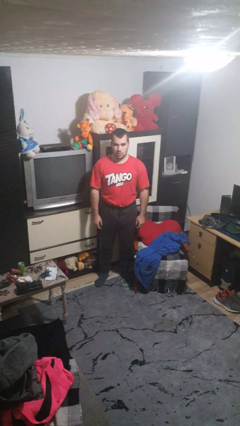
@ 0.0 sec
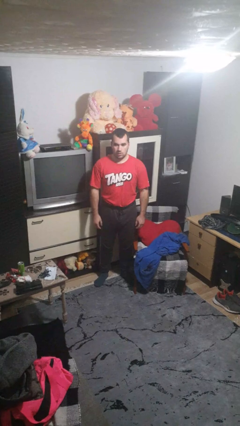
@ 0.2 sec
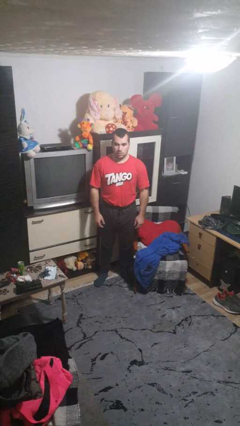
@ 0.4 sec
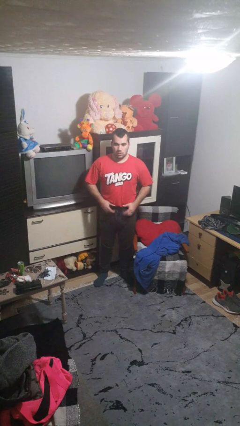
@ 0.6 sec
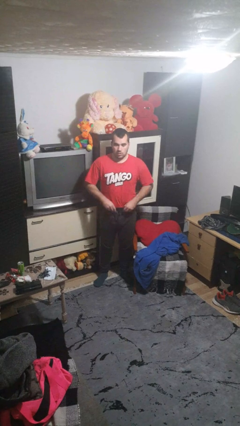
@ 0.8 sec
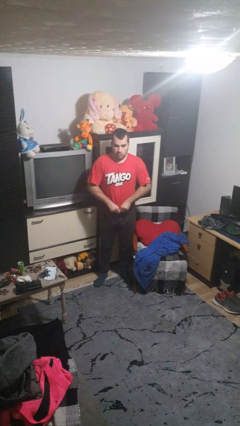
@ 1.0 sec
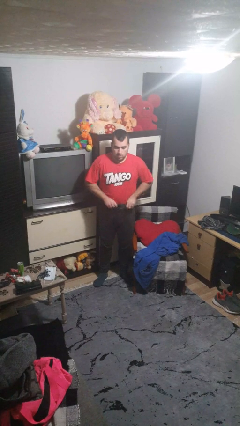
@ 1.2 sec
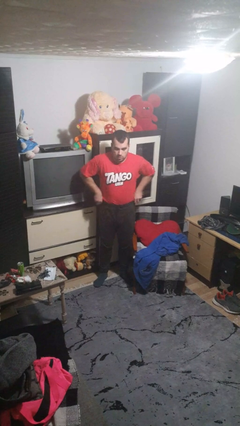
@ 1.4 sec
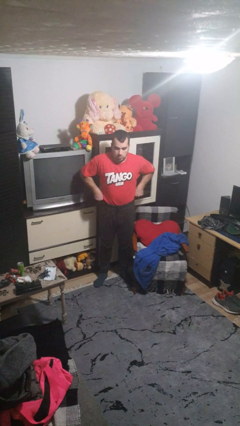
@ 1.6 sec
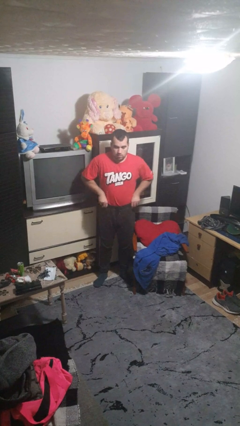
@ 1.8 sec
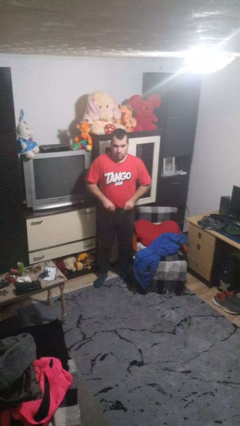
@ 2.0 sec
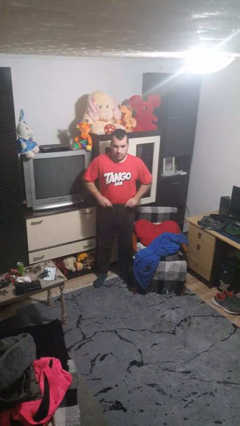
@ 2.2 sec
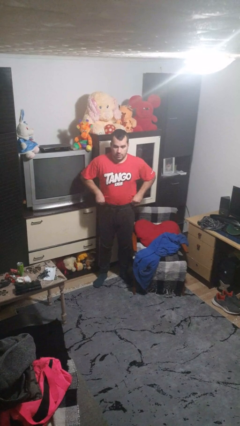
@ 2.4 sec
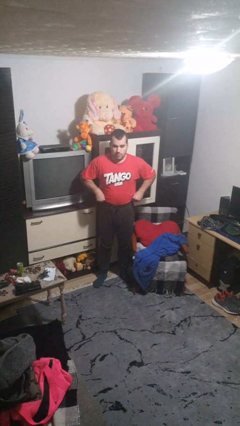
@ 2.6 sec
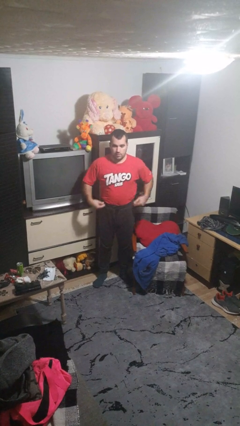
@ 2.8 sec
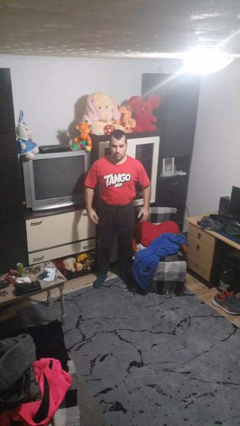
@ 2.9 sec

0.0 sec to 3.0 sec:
person hikes up pants

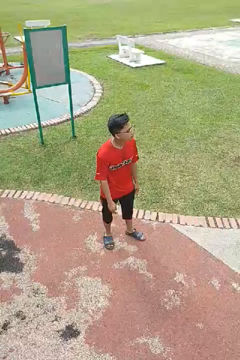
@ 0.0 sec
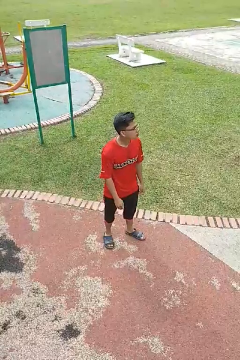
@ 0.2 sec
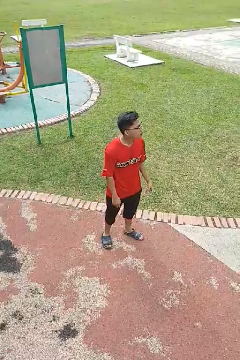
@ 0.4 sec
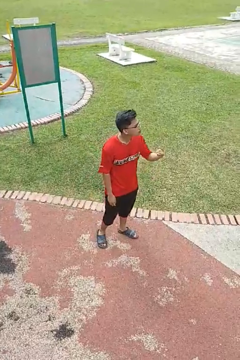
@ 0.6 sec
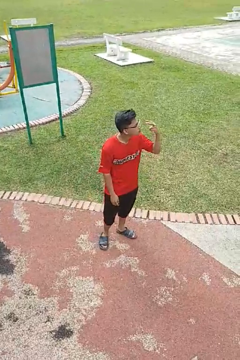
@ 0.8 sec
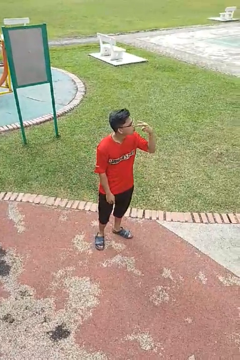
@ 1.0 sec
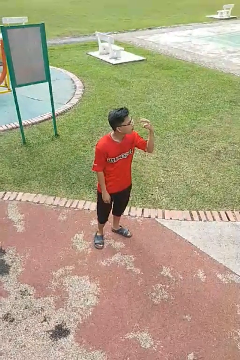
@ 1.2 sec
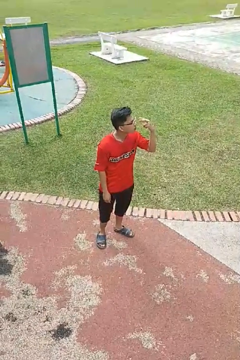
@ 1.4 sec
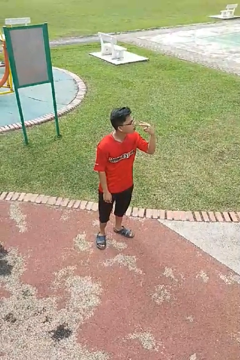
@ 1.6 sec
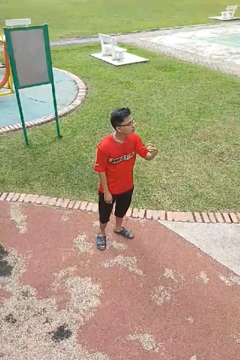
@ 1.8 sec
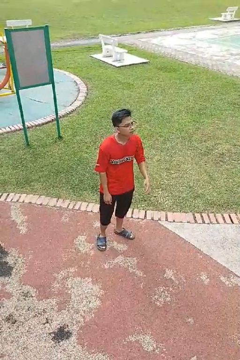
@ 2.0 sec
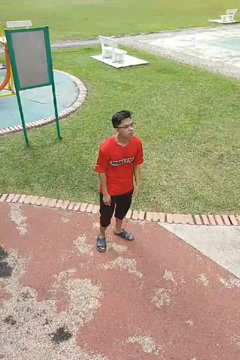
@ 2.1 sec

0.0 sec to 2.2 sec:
person gestures watch closely

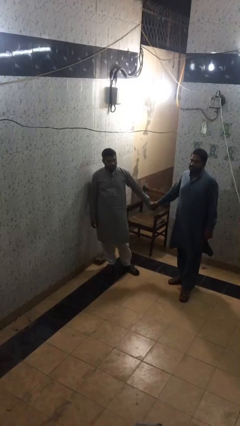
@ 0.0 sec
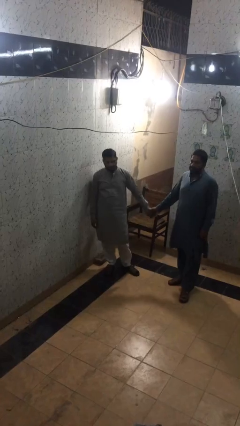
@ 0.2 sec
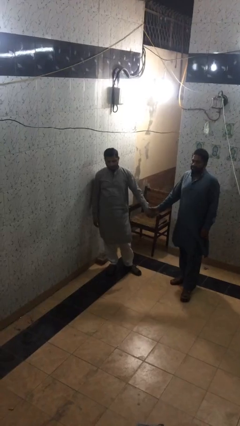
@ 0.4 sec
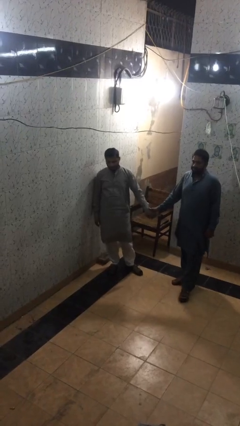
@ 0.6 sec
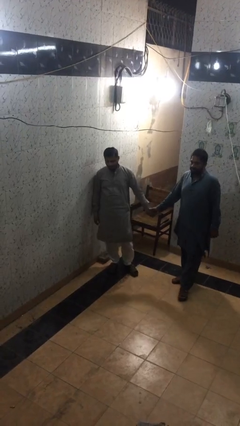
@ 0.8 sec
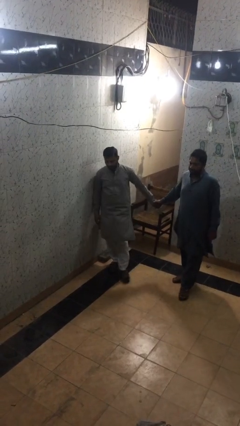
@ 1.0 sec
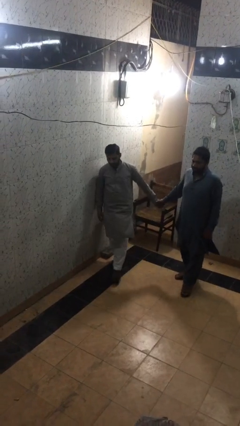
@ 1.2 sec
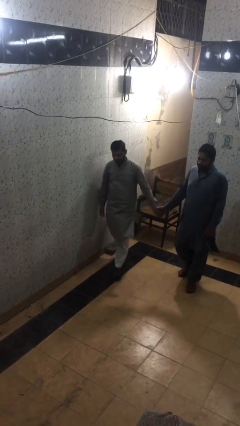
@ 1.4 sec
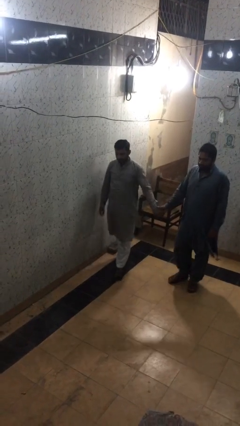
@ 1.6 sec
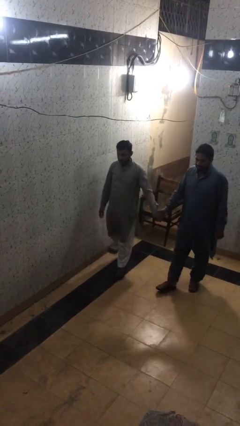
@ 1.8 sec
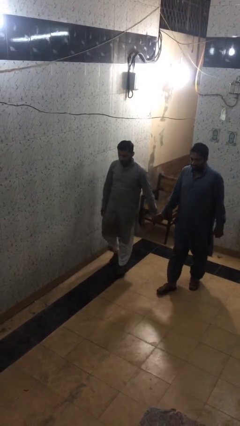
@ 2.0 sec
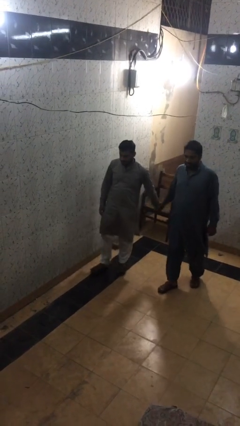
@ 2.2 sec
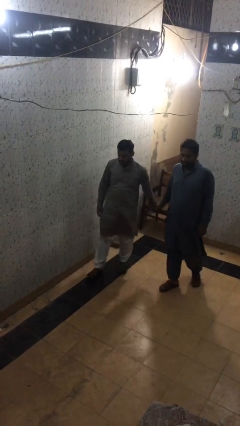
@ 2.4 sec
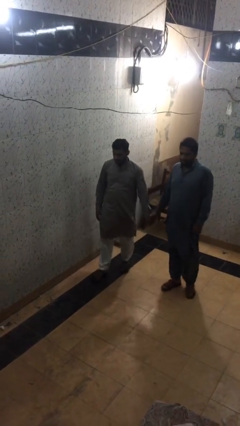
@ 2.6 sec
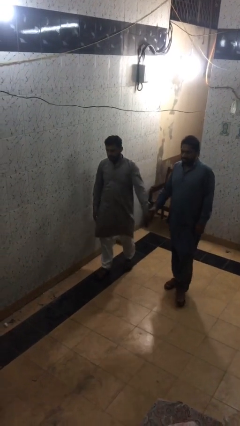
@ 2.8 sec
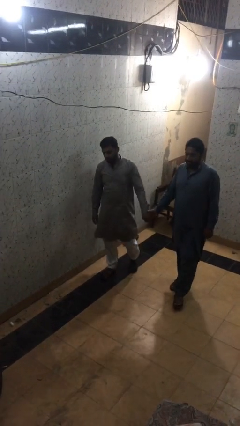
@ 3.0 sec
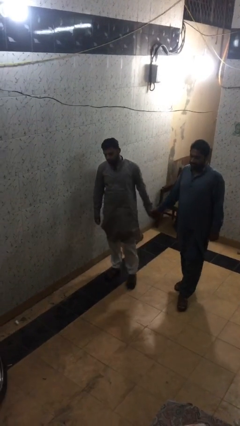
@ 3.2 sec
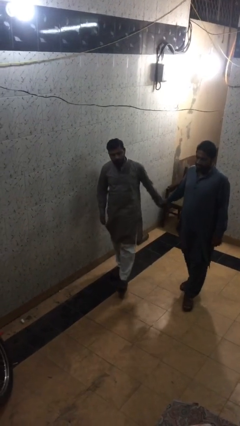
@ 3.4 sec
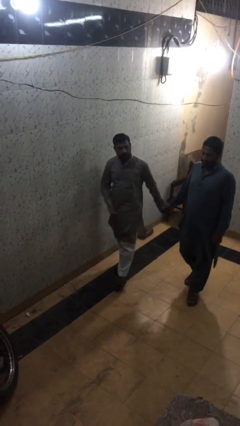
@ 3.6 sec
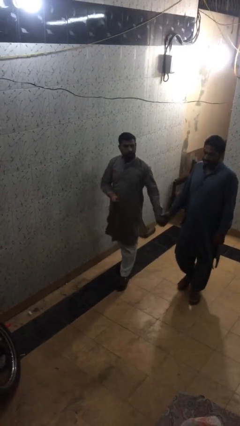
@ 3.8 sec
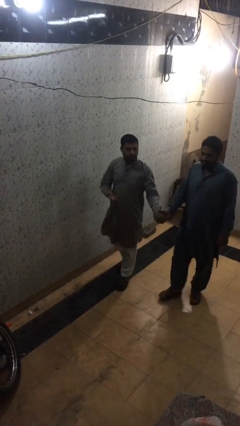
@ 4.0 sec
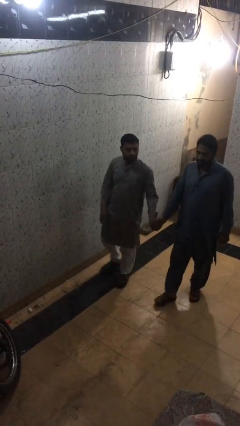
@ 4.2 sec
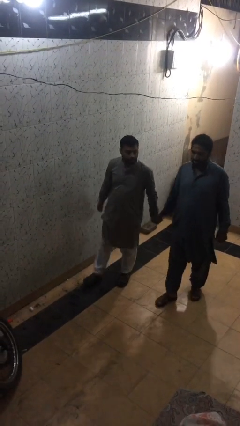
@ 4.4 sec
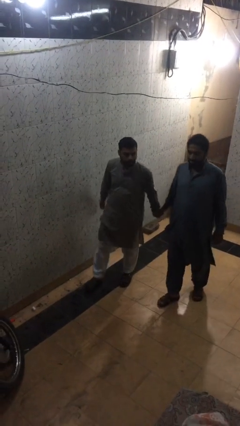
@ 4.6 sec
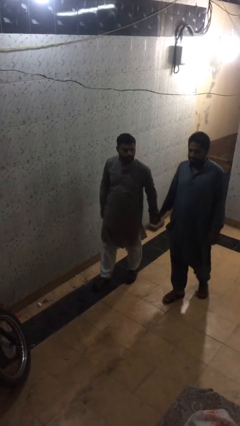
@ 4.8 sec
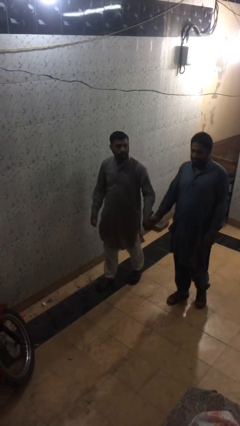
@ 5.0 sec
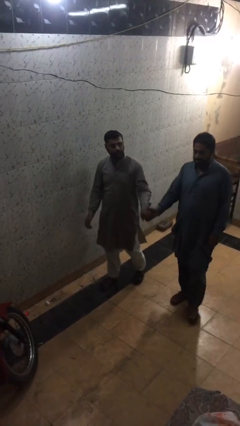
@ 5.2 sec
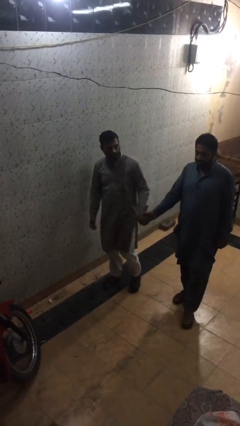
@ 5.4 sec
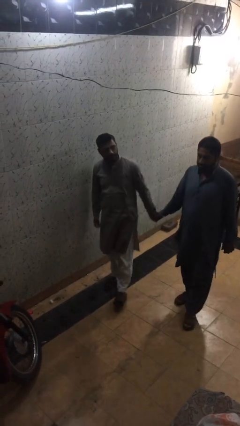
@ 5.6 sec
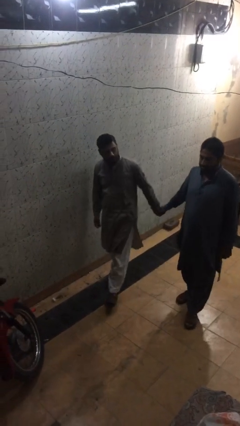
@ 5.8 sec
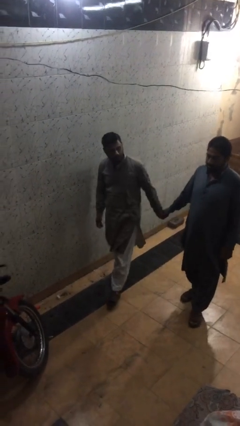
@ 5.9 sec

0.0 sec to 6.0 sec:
person holds hand

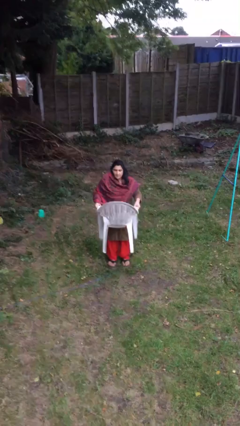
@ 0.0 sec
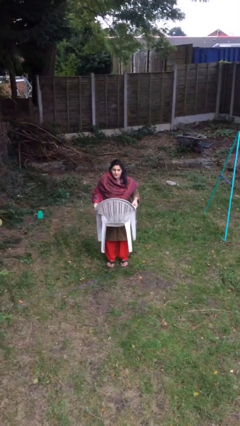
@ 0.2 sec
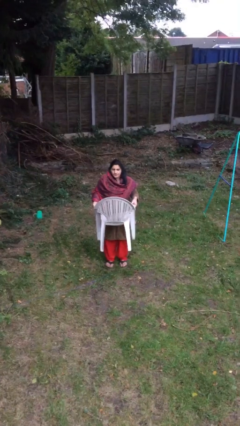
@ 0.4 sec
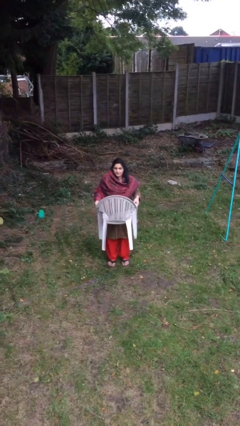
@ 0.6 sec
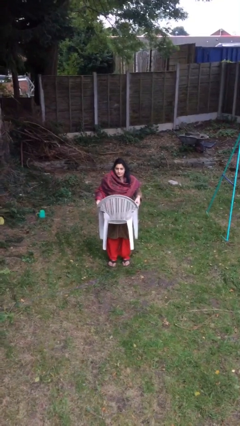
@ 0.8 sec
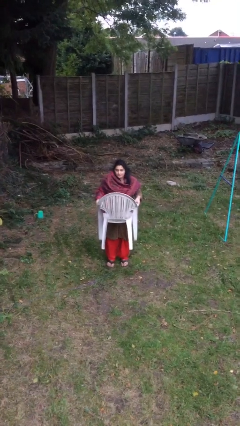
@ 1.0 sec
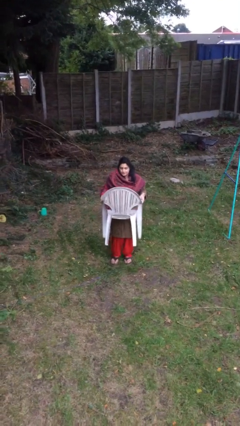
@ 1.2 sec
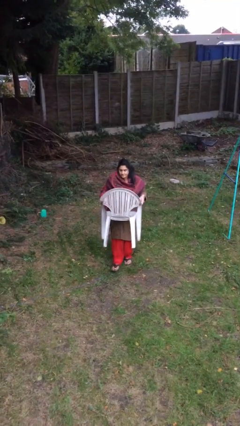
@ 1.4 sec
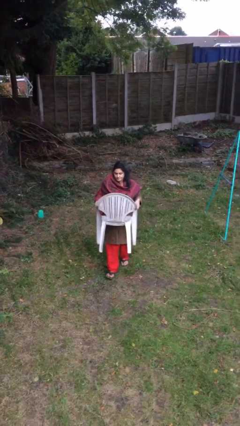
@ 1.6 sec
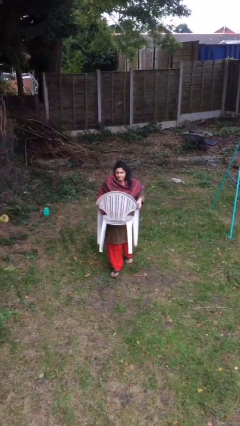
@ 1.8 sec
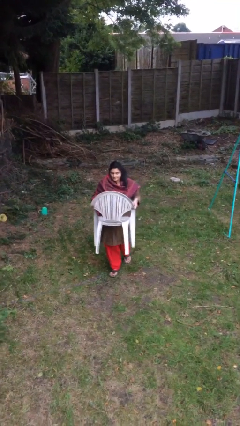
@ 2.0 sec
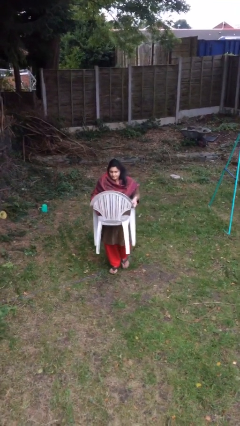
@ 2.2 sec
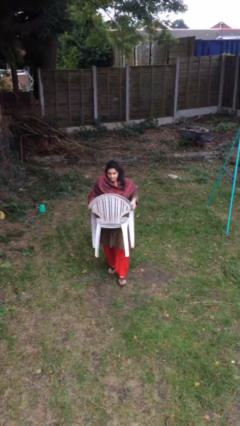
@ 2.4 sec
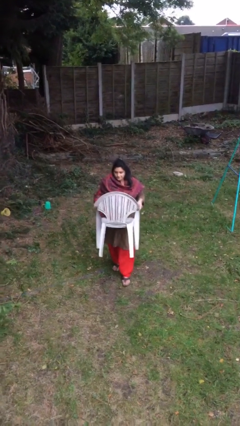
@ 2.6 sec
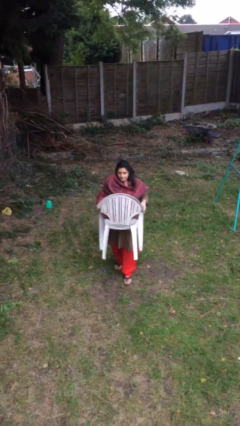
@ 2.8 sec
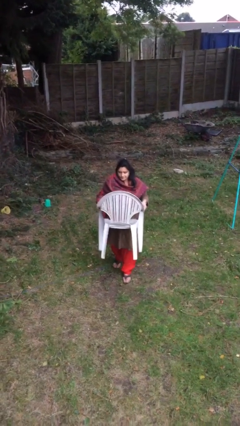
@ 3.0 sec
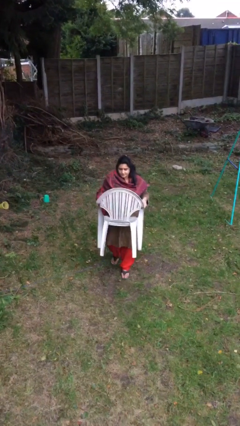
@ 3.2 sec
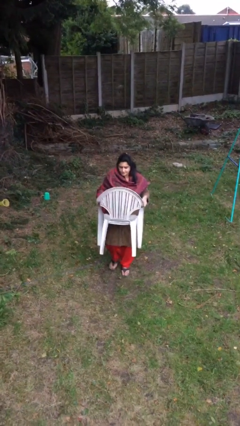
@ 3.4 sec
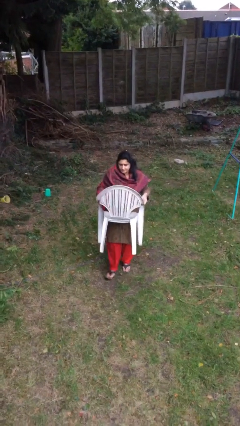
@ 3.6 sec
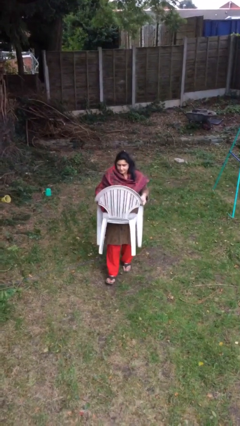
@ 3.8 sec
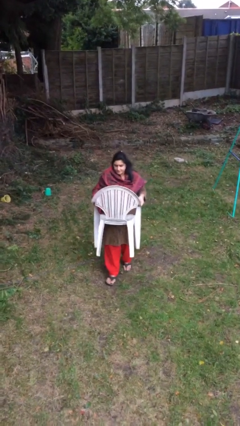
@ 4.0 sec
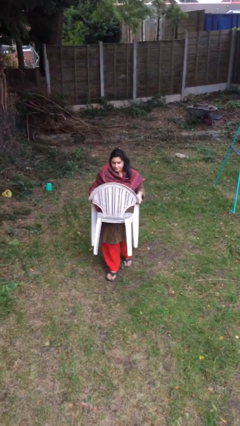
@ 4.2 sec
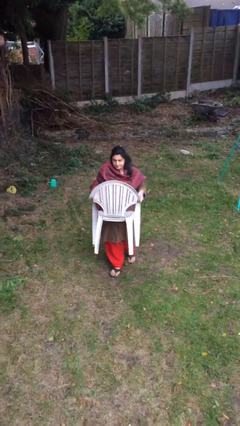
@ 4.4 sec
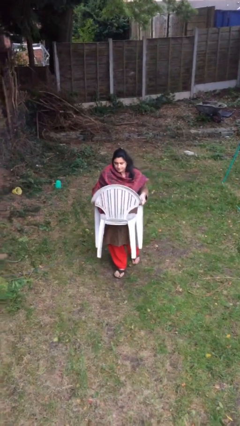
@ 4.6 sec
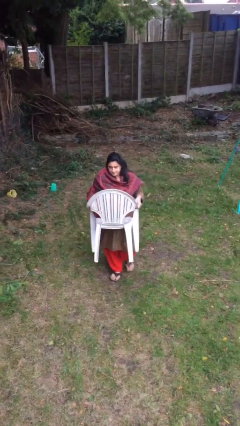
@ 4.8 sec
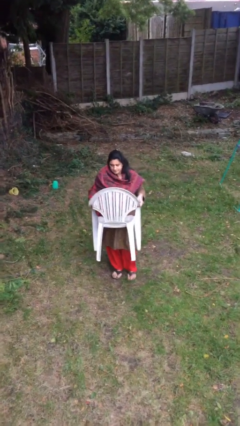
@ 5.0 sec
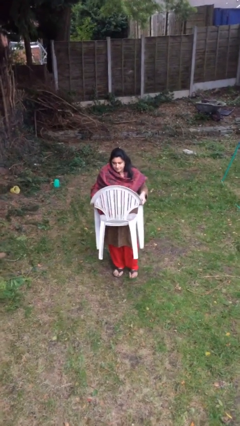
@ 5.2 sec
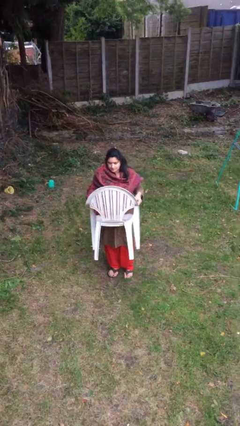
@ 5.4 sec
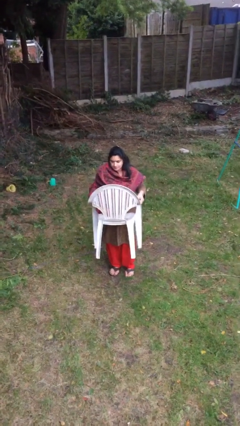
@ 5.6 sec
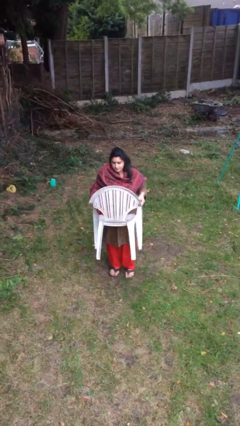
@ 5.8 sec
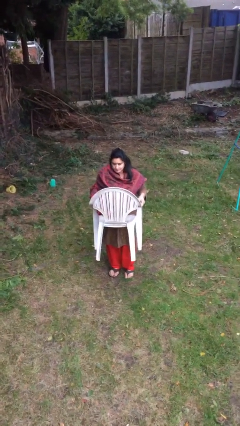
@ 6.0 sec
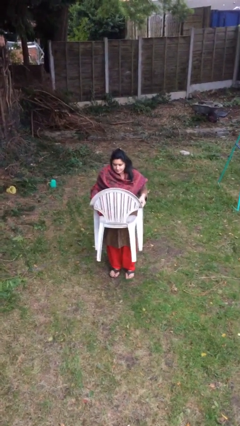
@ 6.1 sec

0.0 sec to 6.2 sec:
person carries heavy object

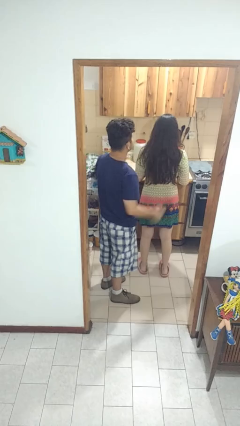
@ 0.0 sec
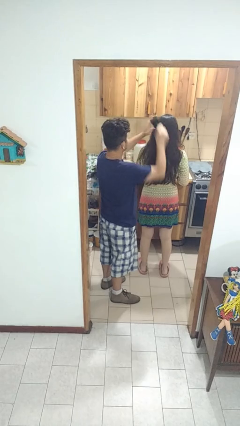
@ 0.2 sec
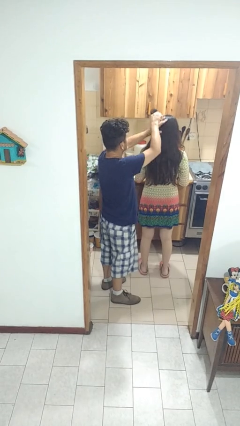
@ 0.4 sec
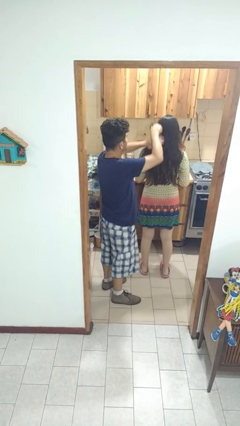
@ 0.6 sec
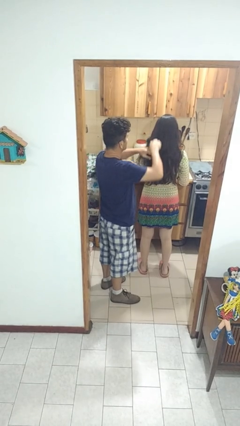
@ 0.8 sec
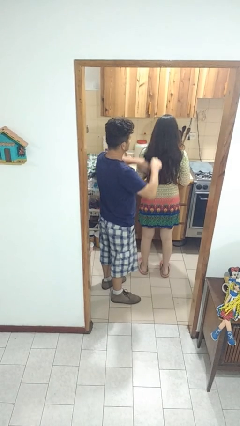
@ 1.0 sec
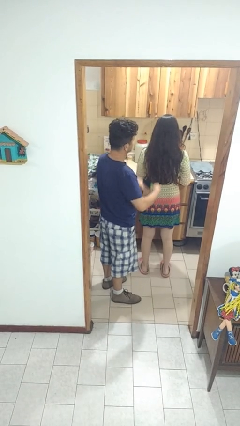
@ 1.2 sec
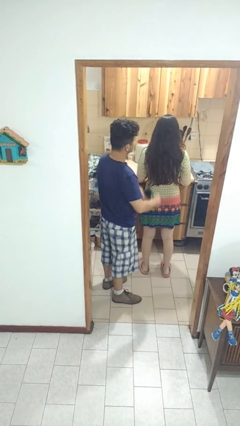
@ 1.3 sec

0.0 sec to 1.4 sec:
person brushes hair of person
